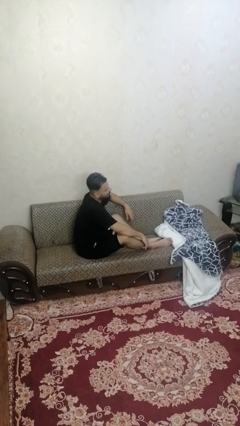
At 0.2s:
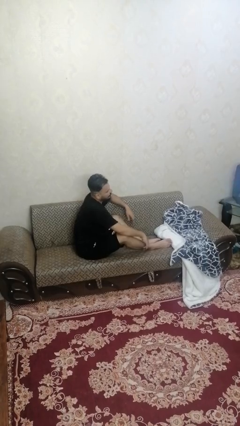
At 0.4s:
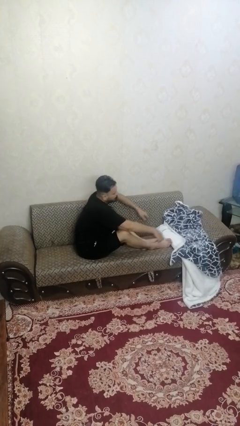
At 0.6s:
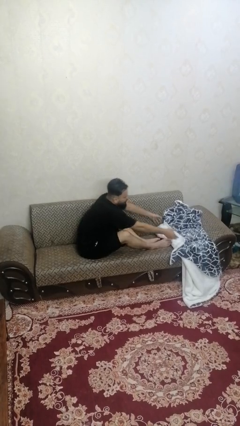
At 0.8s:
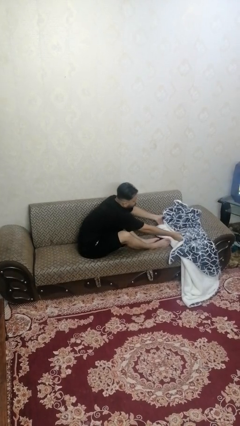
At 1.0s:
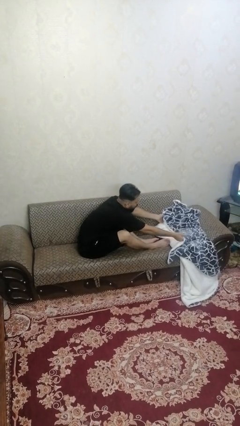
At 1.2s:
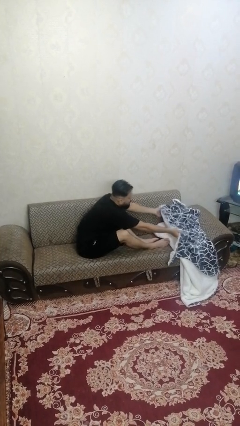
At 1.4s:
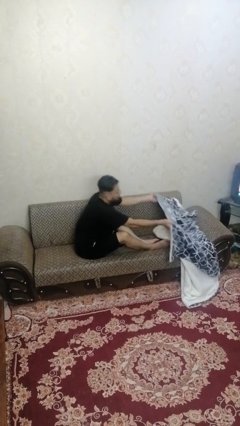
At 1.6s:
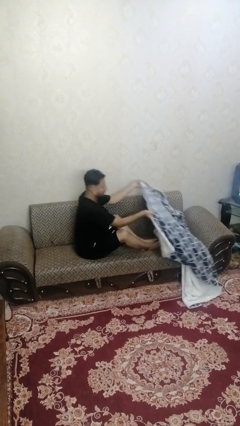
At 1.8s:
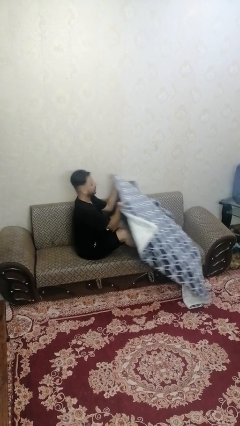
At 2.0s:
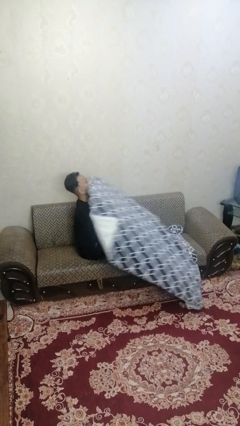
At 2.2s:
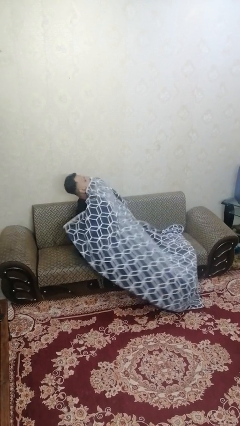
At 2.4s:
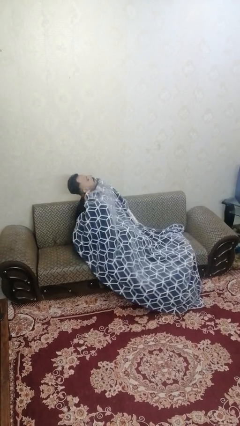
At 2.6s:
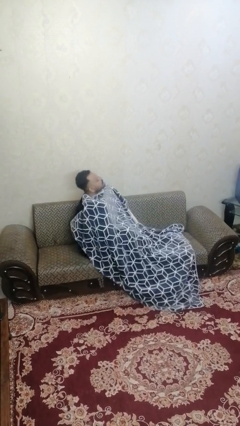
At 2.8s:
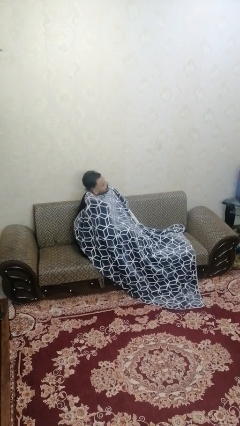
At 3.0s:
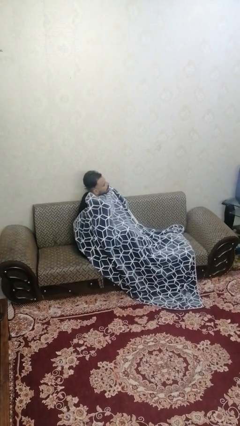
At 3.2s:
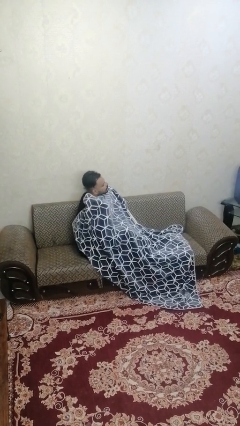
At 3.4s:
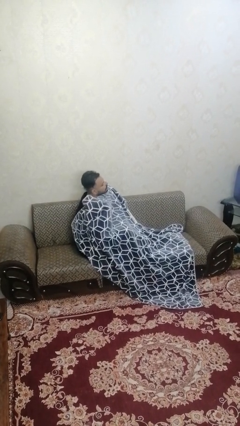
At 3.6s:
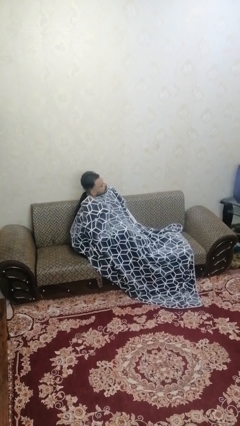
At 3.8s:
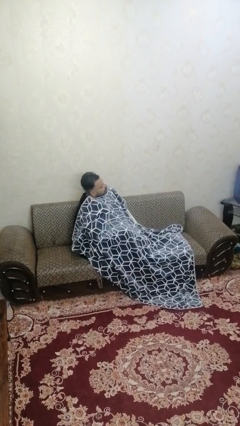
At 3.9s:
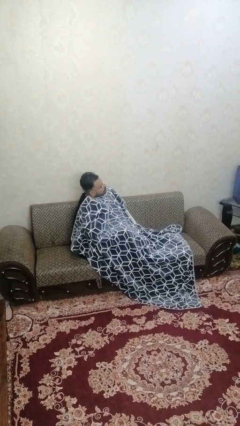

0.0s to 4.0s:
person covers with blanket

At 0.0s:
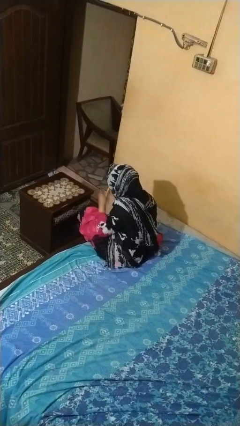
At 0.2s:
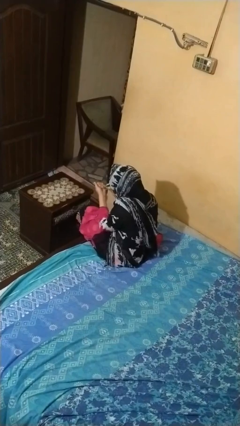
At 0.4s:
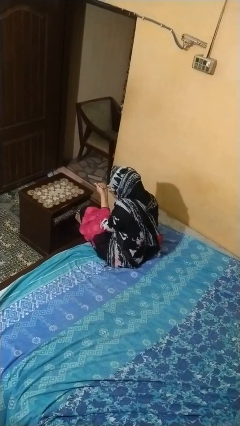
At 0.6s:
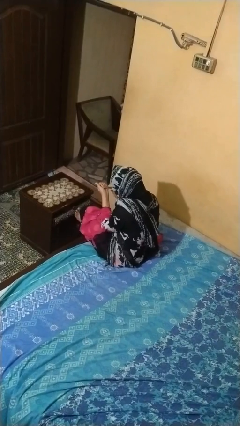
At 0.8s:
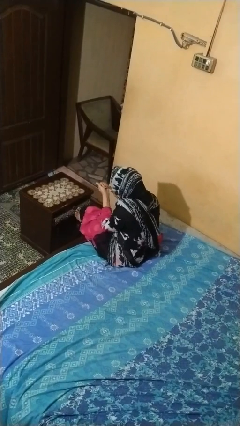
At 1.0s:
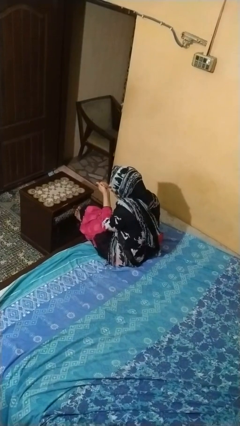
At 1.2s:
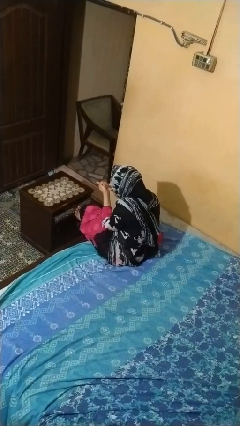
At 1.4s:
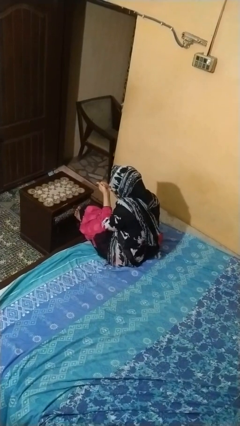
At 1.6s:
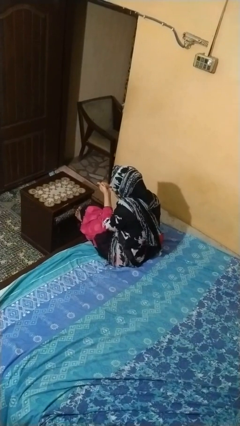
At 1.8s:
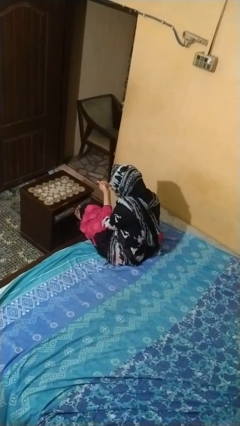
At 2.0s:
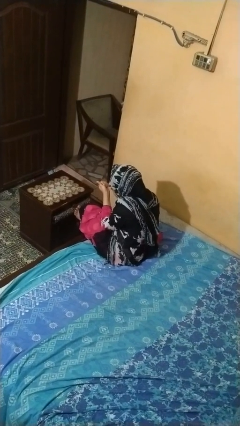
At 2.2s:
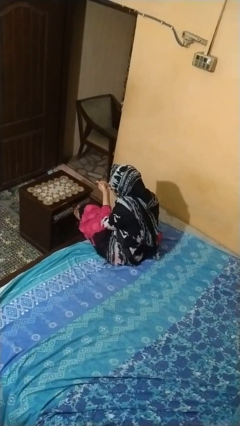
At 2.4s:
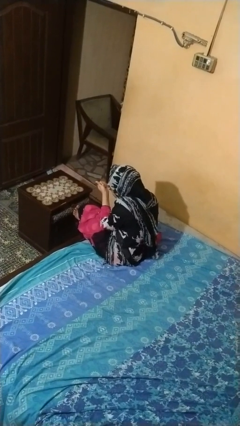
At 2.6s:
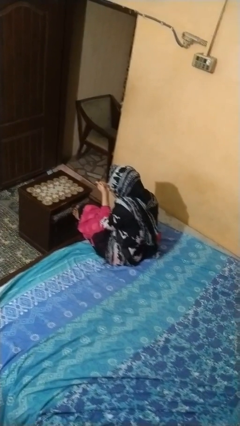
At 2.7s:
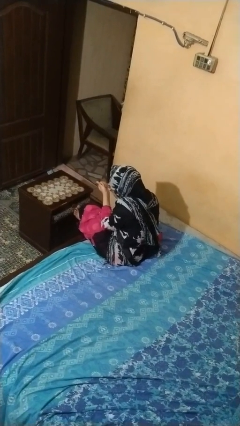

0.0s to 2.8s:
person clips fingernails

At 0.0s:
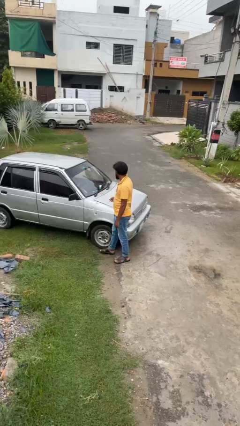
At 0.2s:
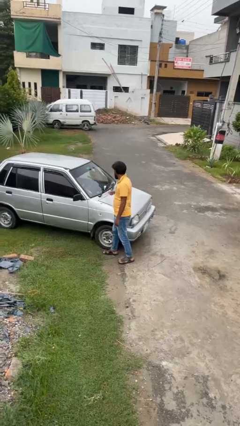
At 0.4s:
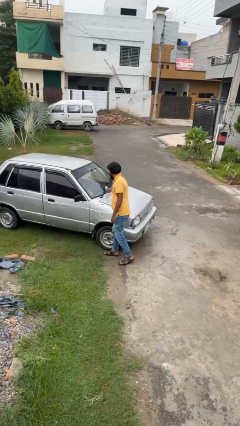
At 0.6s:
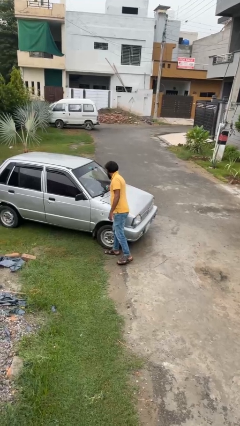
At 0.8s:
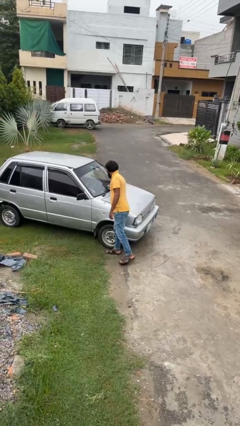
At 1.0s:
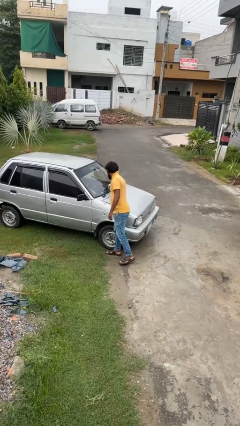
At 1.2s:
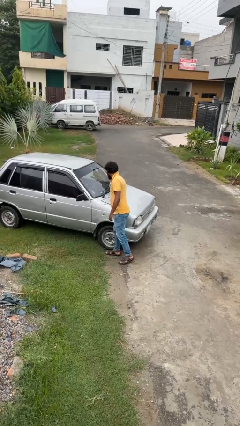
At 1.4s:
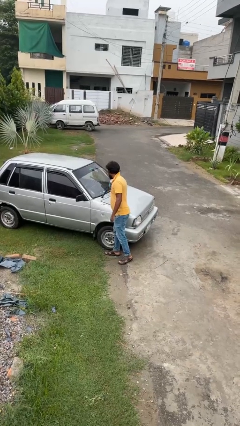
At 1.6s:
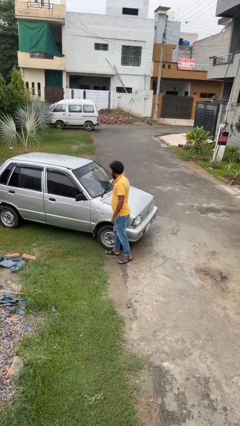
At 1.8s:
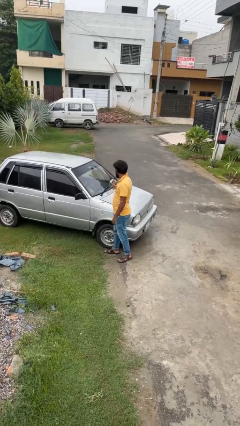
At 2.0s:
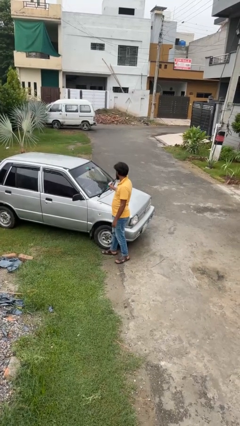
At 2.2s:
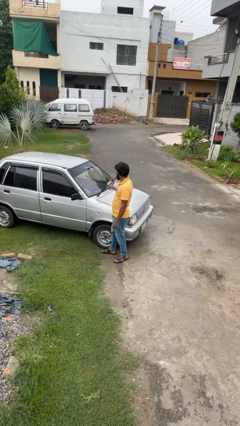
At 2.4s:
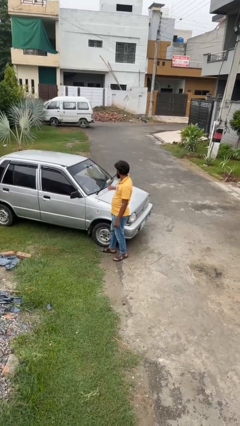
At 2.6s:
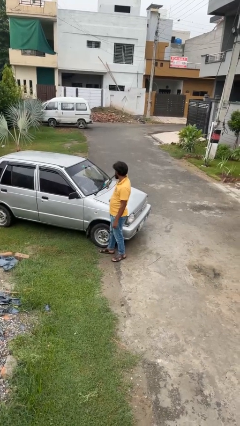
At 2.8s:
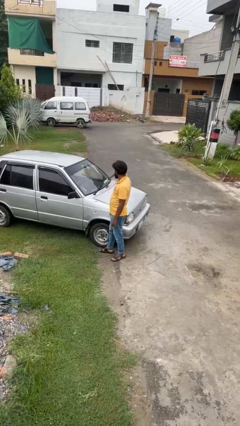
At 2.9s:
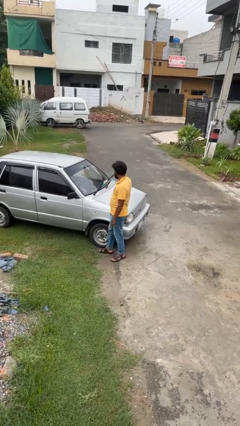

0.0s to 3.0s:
person flips up car wipers

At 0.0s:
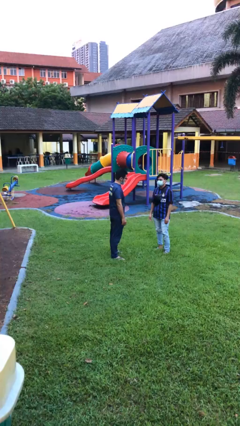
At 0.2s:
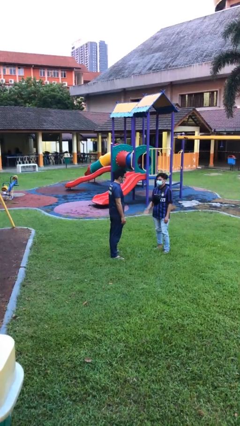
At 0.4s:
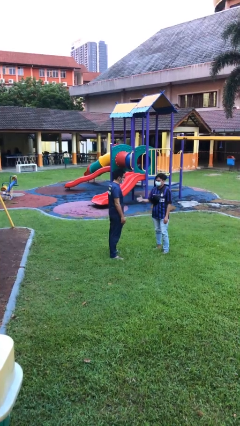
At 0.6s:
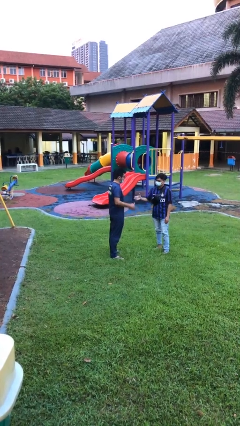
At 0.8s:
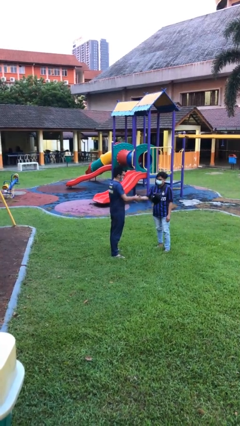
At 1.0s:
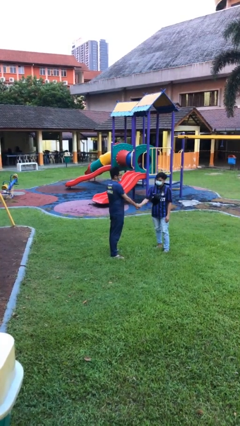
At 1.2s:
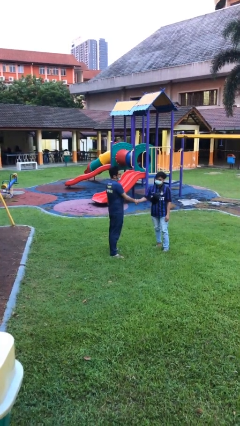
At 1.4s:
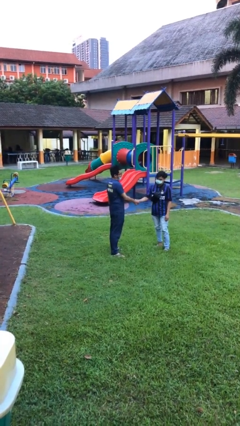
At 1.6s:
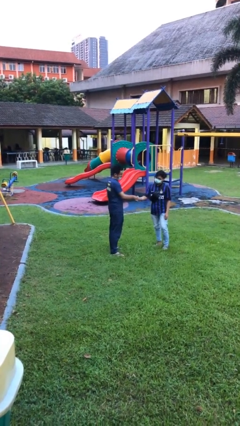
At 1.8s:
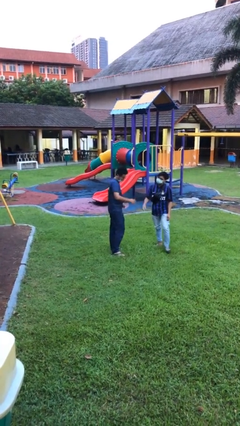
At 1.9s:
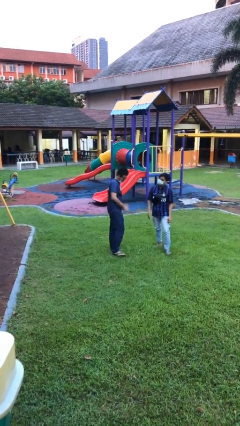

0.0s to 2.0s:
person shakes hand

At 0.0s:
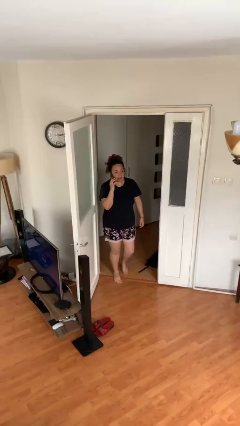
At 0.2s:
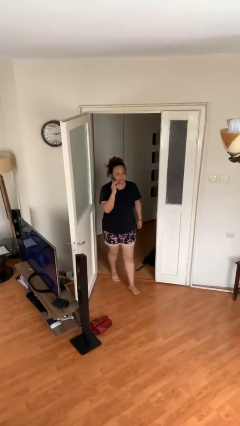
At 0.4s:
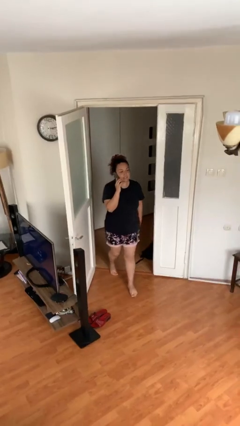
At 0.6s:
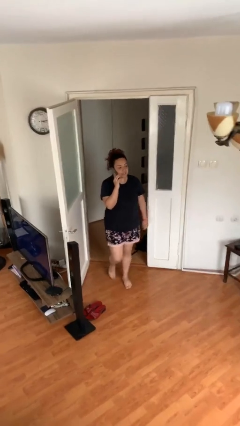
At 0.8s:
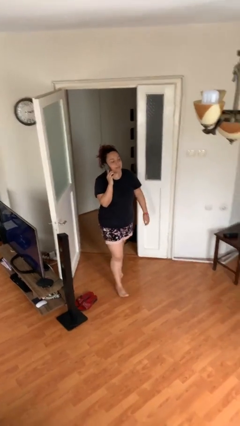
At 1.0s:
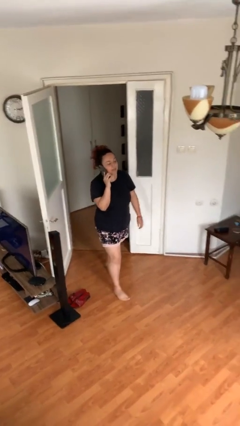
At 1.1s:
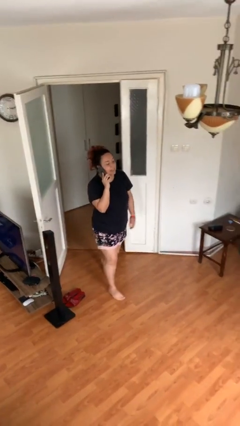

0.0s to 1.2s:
person enters scene through structure

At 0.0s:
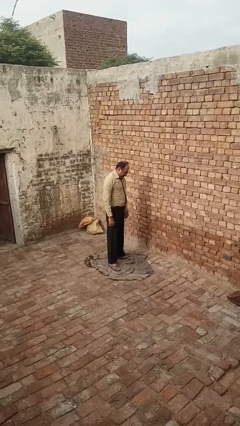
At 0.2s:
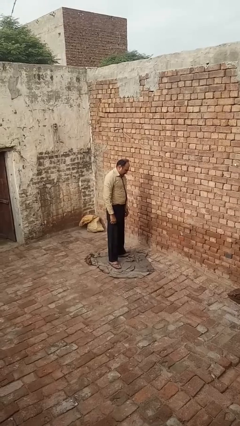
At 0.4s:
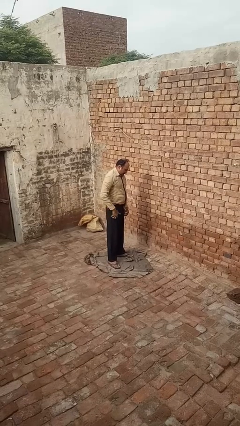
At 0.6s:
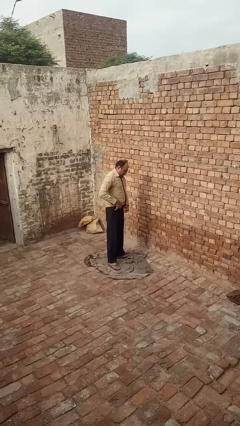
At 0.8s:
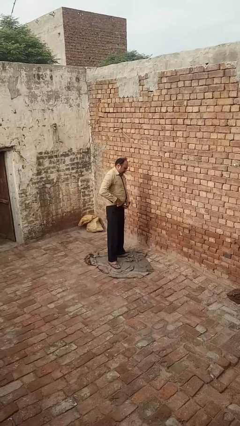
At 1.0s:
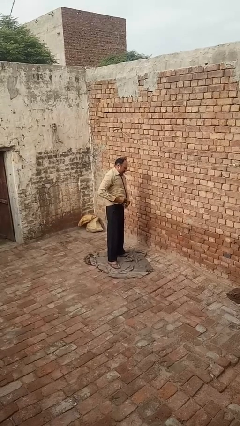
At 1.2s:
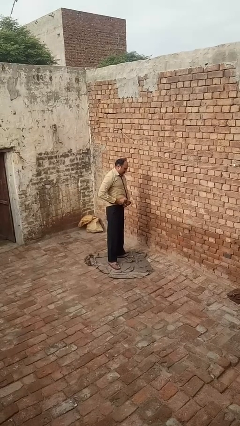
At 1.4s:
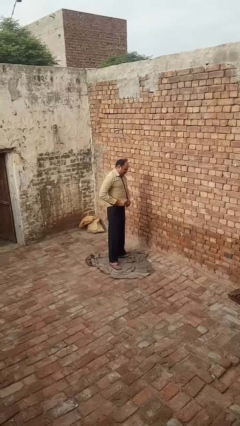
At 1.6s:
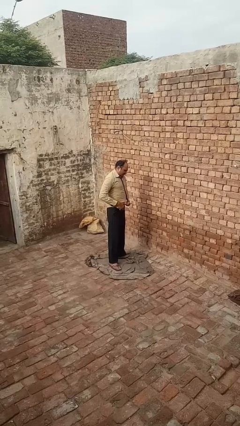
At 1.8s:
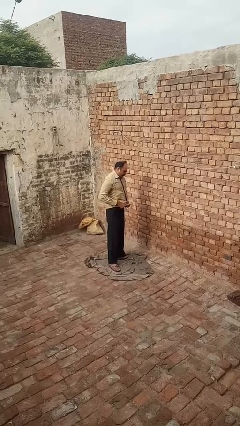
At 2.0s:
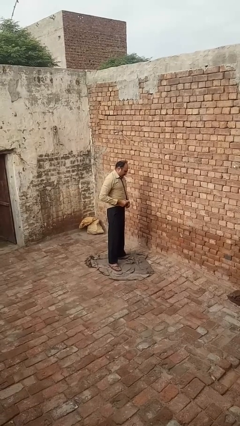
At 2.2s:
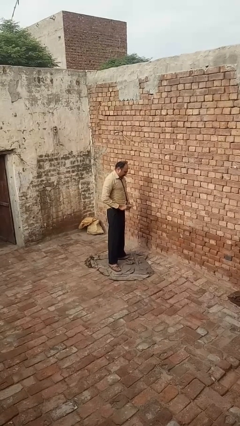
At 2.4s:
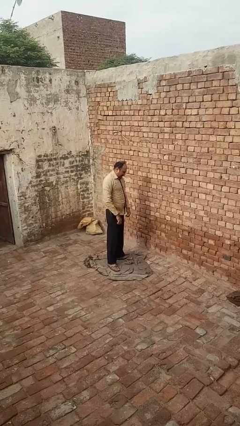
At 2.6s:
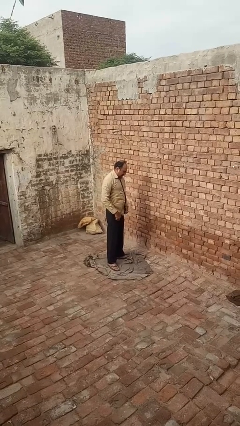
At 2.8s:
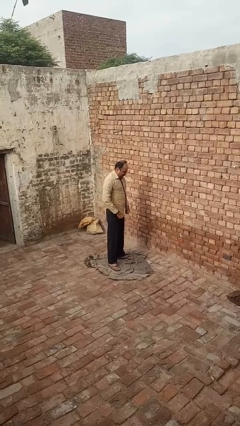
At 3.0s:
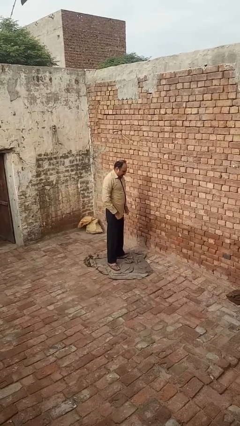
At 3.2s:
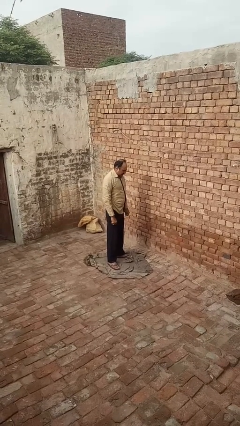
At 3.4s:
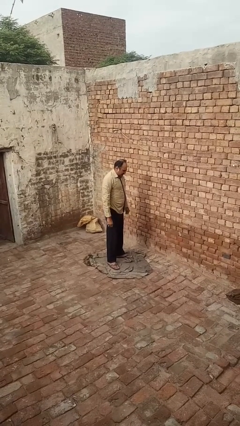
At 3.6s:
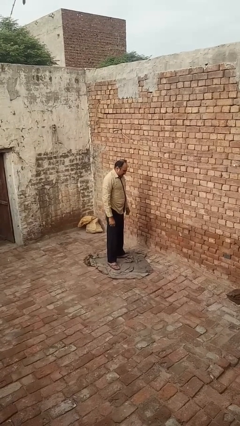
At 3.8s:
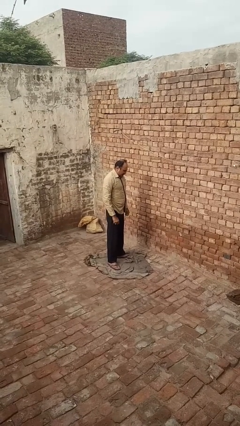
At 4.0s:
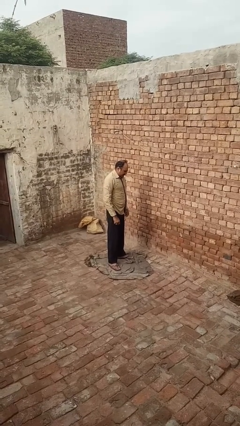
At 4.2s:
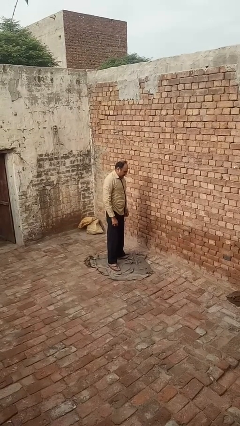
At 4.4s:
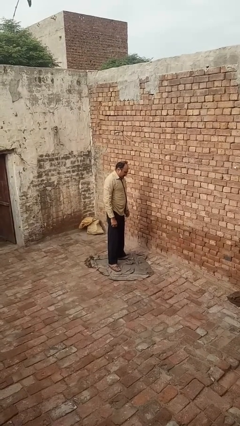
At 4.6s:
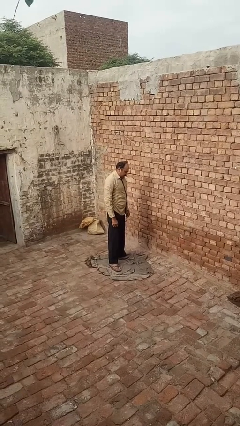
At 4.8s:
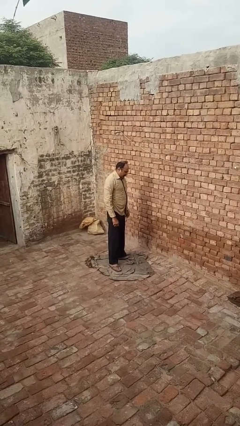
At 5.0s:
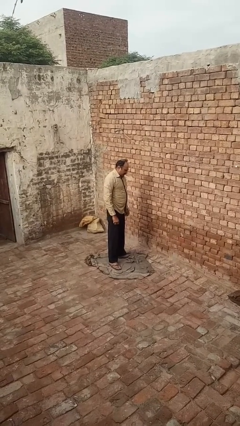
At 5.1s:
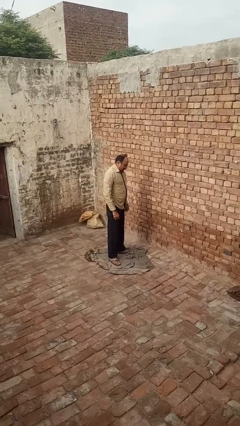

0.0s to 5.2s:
person untucks shirt
